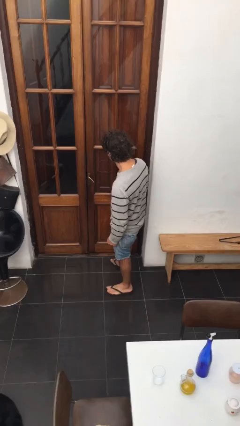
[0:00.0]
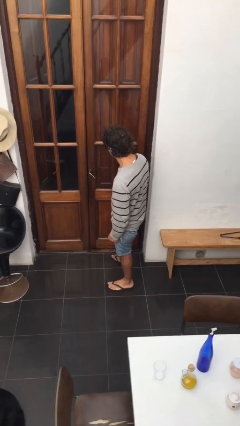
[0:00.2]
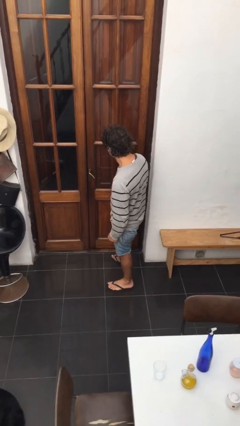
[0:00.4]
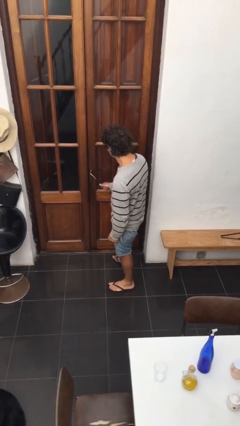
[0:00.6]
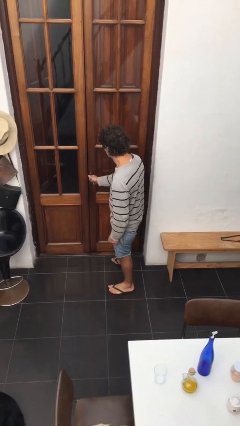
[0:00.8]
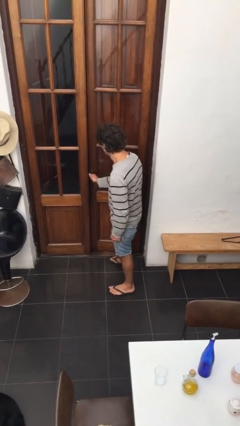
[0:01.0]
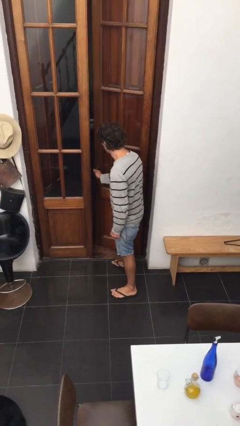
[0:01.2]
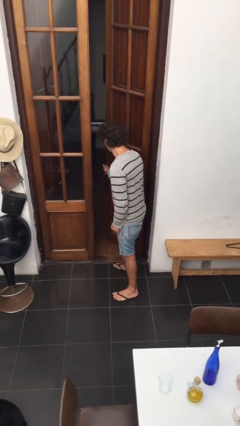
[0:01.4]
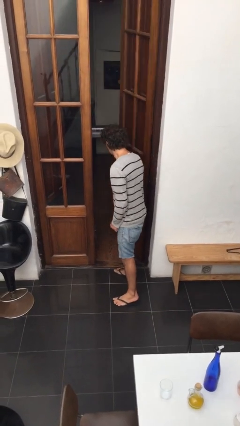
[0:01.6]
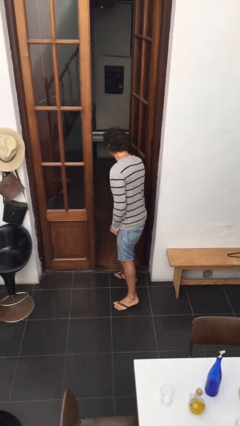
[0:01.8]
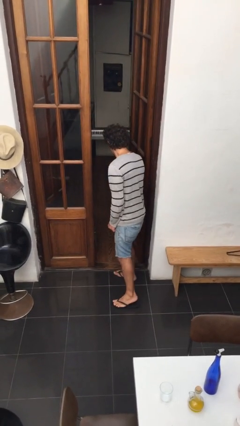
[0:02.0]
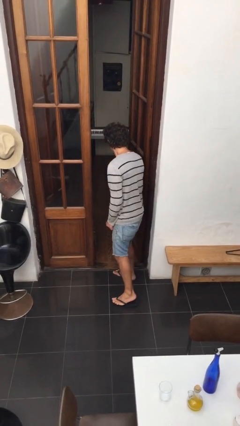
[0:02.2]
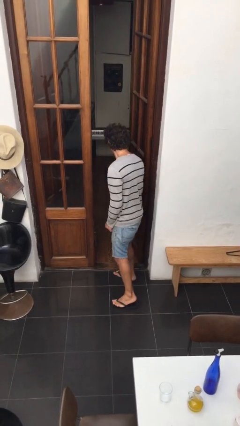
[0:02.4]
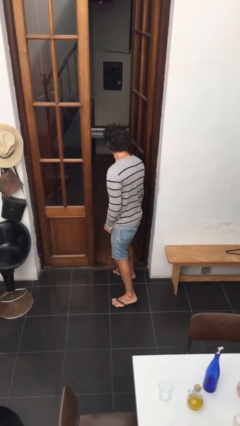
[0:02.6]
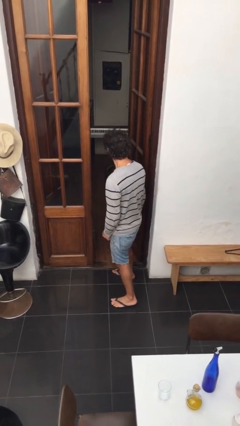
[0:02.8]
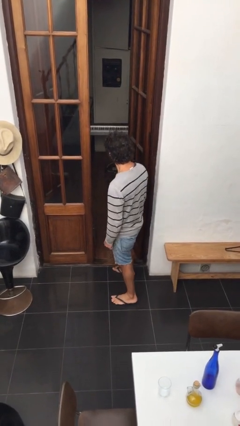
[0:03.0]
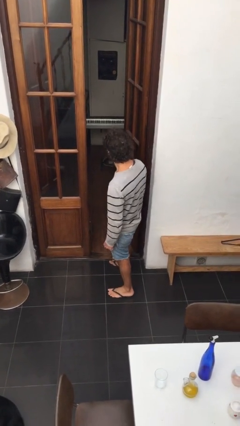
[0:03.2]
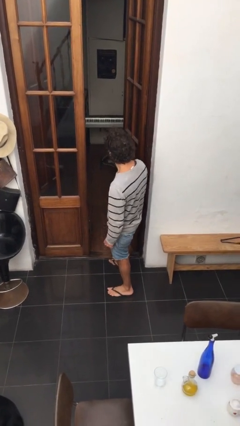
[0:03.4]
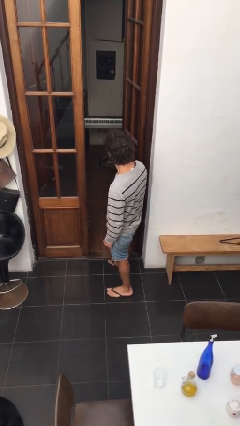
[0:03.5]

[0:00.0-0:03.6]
person opens facility door

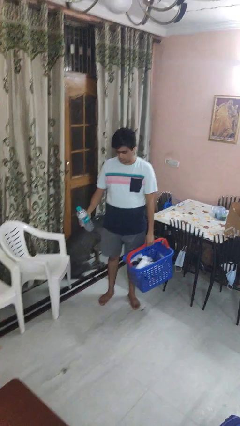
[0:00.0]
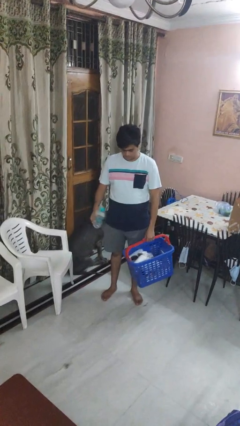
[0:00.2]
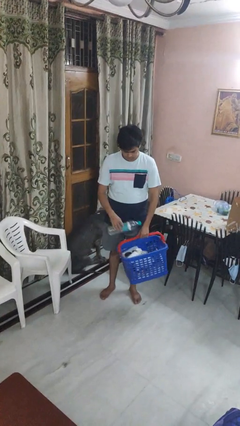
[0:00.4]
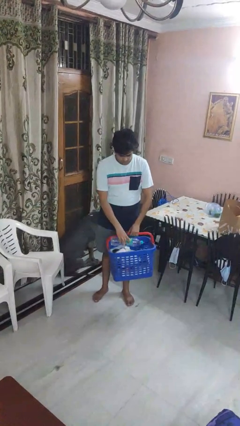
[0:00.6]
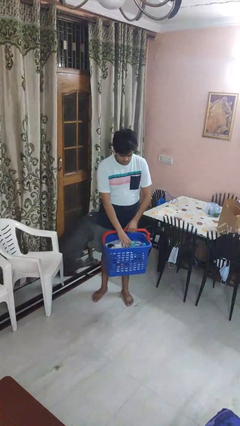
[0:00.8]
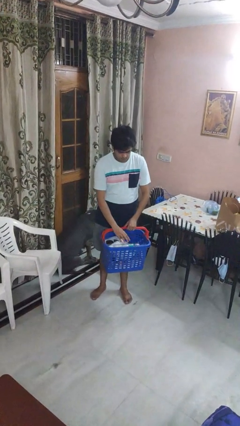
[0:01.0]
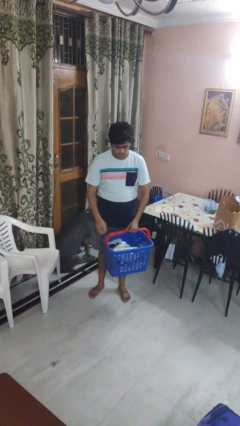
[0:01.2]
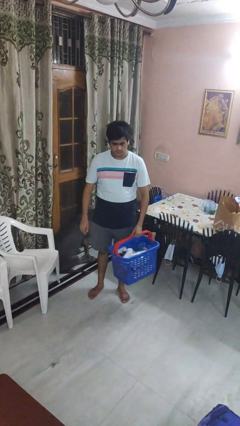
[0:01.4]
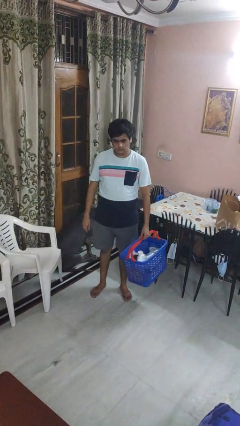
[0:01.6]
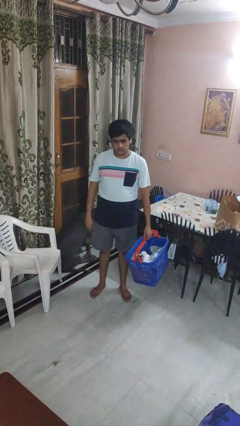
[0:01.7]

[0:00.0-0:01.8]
person puts object into basket

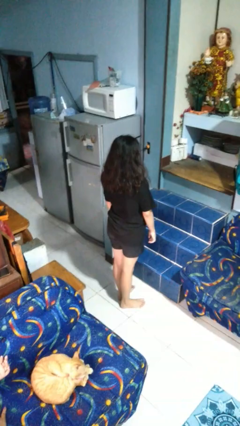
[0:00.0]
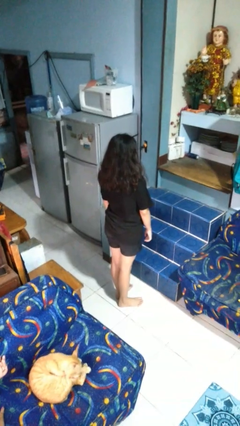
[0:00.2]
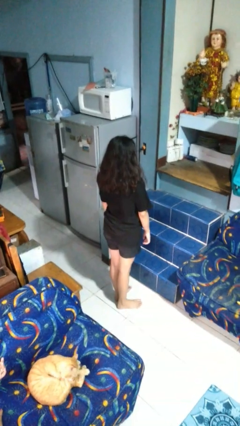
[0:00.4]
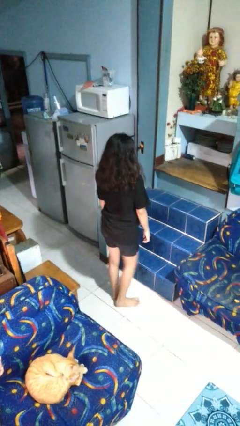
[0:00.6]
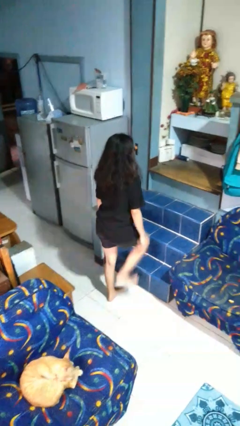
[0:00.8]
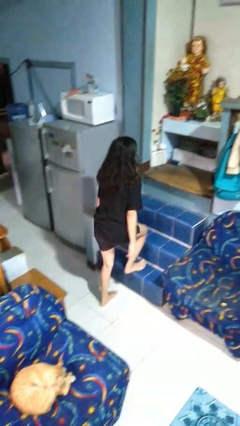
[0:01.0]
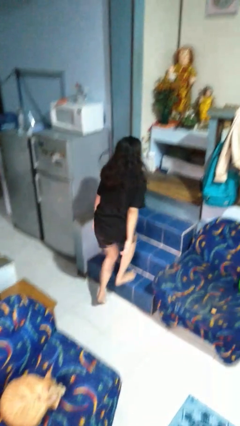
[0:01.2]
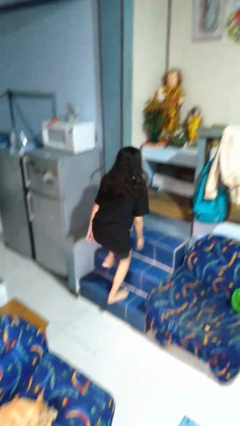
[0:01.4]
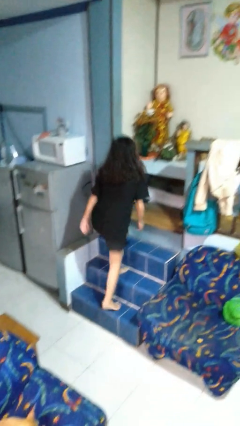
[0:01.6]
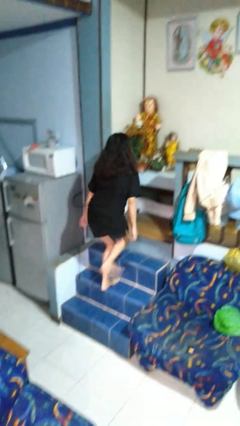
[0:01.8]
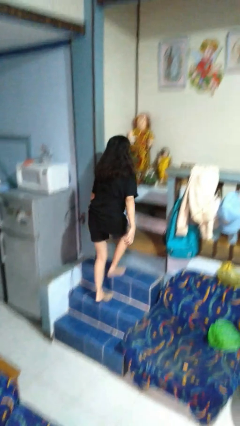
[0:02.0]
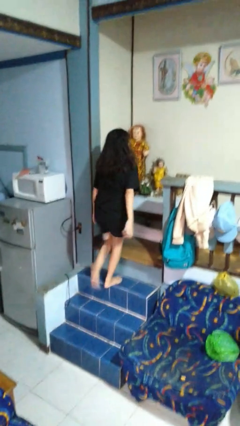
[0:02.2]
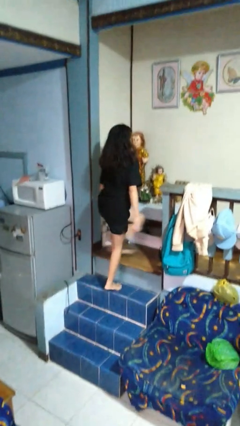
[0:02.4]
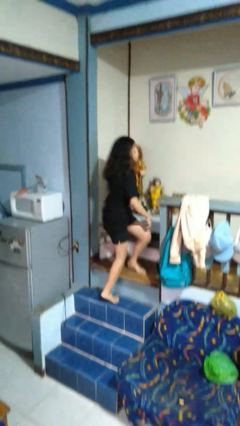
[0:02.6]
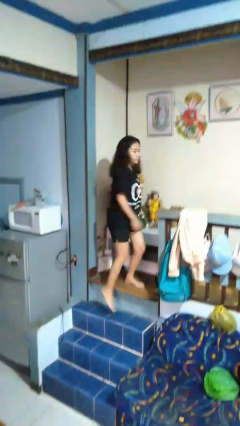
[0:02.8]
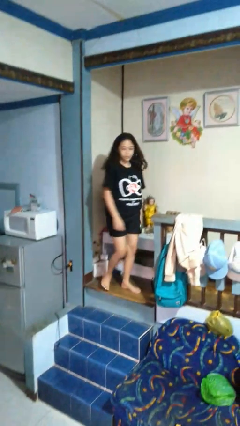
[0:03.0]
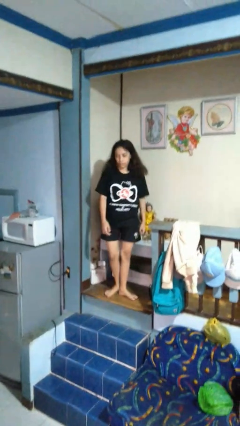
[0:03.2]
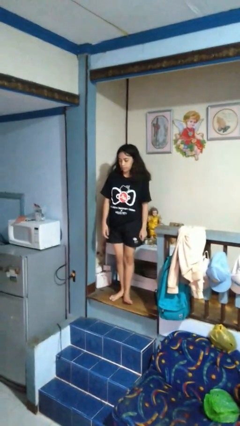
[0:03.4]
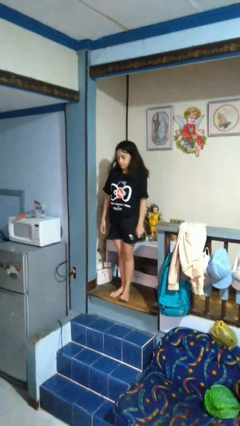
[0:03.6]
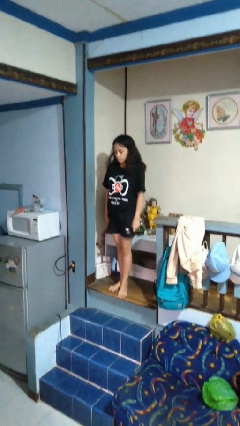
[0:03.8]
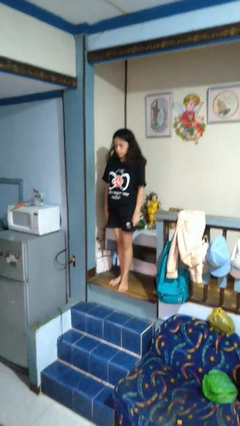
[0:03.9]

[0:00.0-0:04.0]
person climbs up stairs

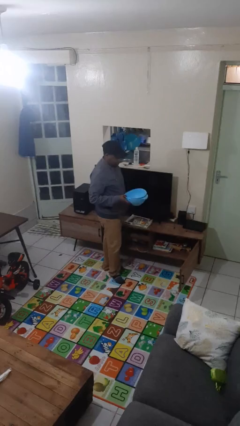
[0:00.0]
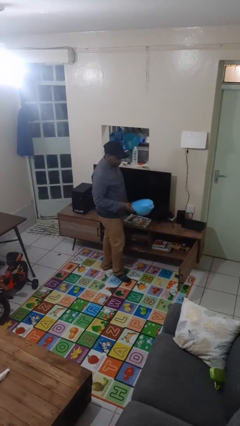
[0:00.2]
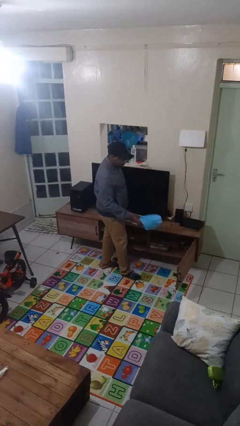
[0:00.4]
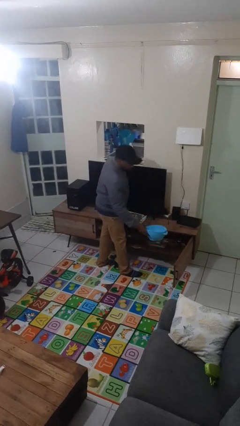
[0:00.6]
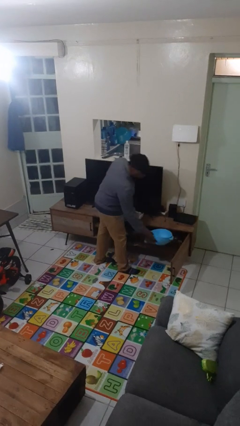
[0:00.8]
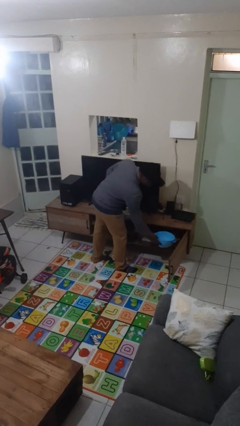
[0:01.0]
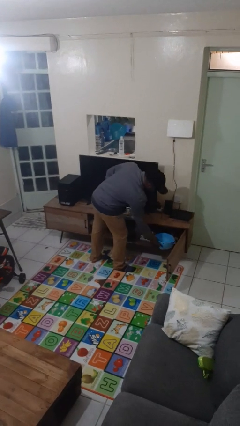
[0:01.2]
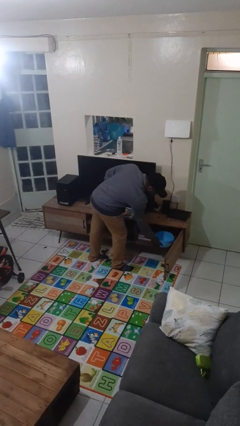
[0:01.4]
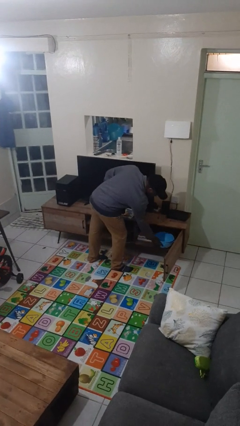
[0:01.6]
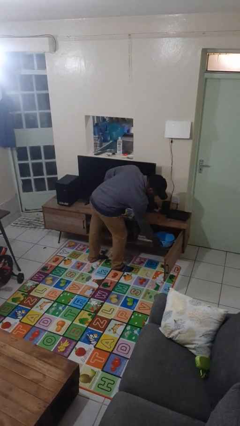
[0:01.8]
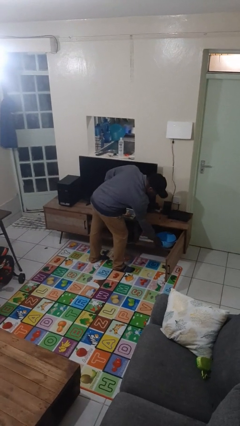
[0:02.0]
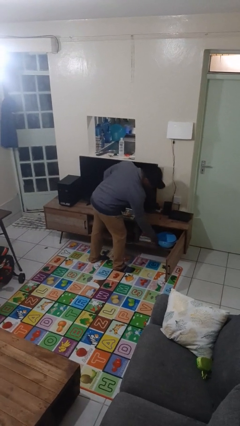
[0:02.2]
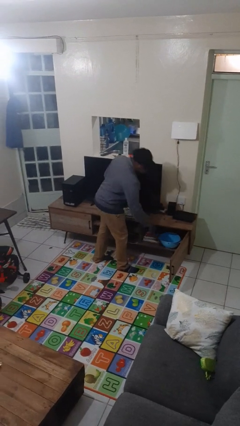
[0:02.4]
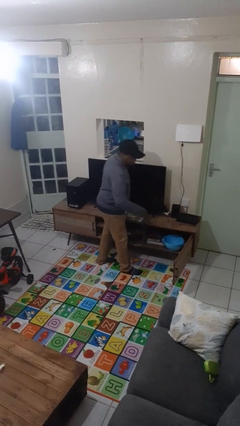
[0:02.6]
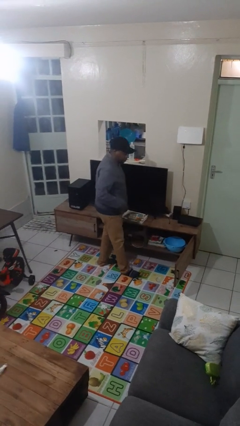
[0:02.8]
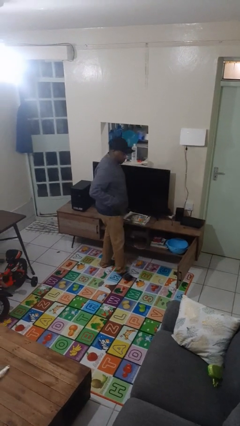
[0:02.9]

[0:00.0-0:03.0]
person puts down object into cabinet

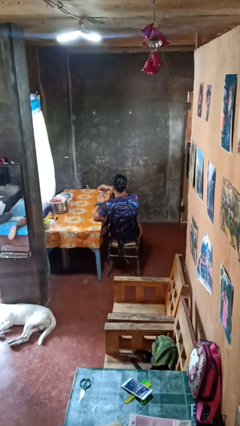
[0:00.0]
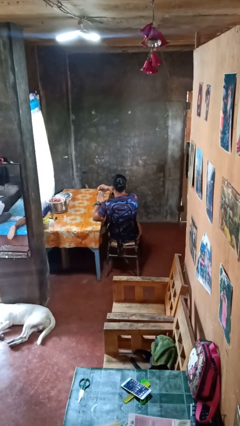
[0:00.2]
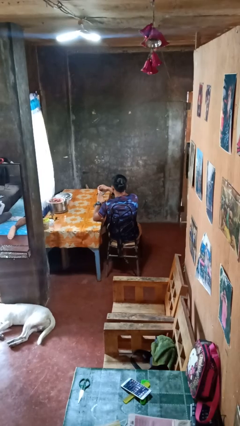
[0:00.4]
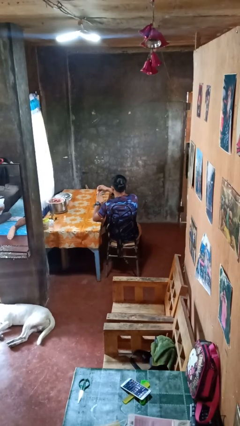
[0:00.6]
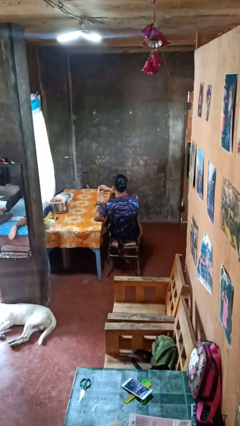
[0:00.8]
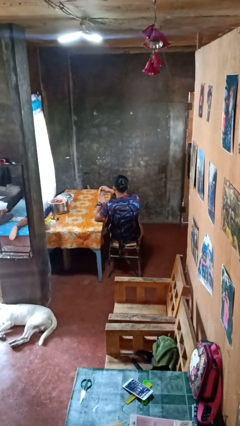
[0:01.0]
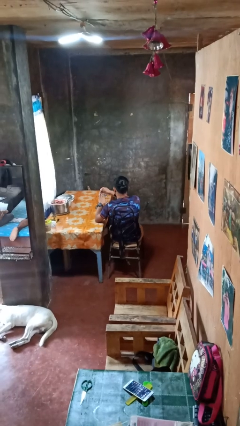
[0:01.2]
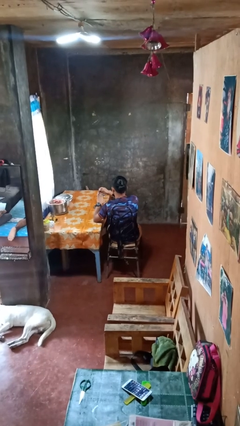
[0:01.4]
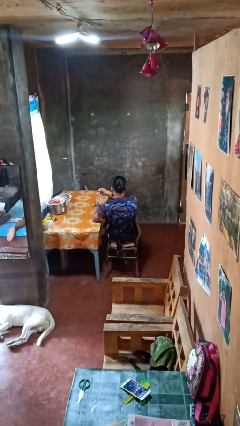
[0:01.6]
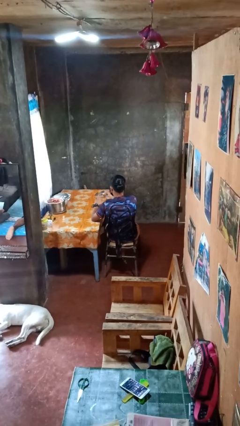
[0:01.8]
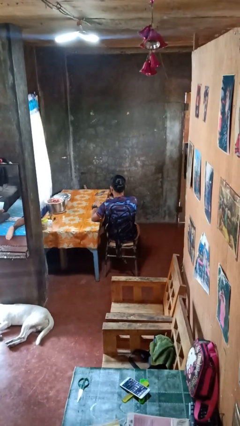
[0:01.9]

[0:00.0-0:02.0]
person clips fingernails

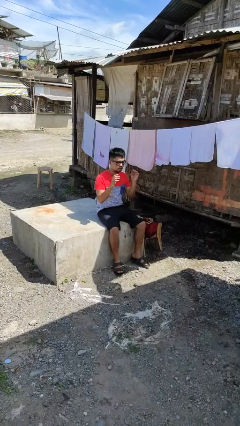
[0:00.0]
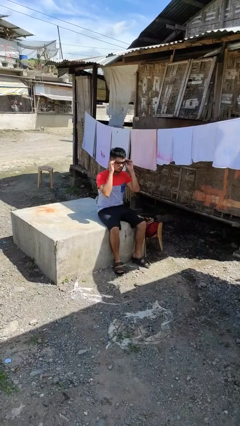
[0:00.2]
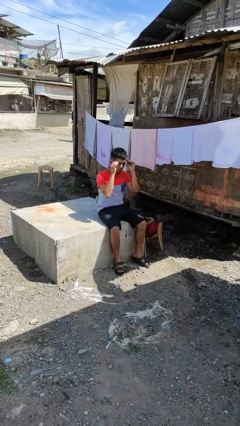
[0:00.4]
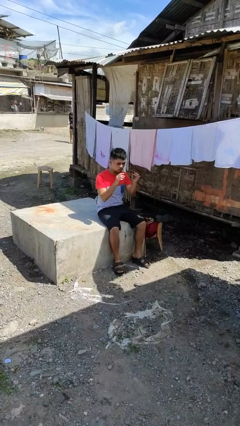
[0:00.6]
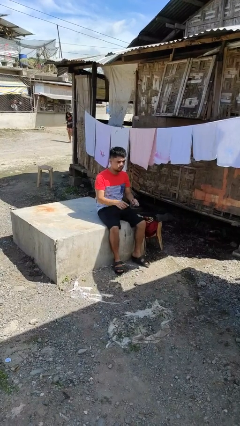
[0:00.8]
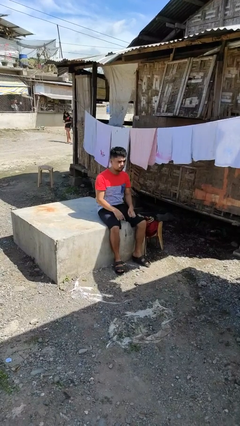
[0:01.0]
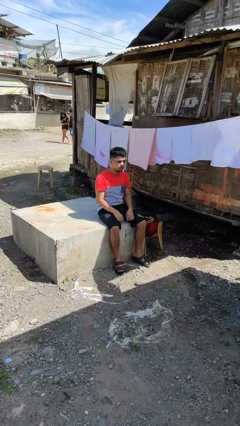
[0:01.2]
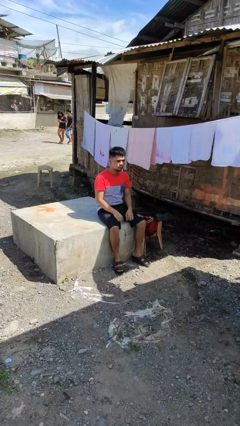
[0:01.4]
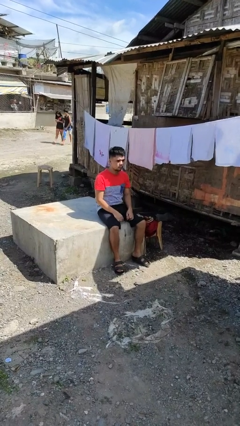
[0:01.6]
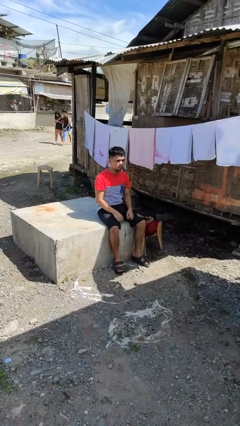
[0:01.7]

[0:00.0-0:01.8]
person takes off glasses

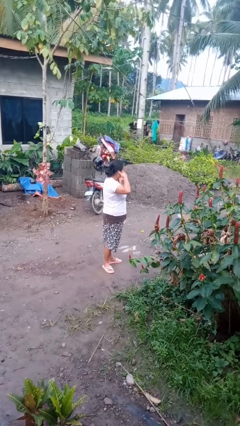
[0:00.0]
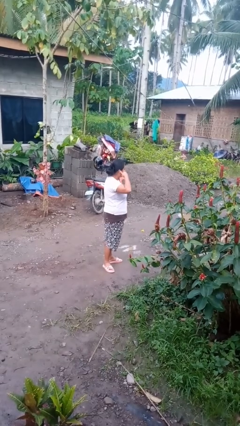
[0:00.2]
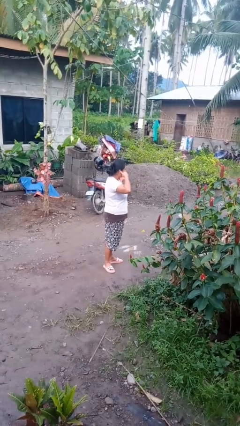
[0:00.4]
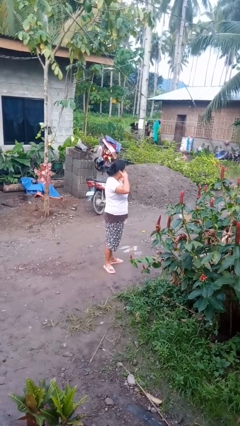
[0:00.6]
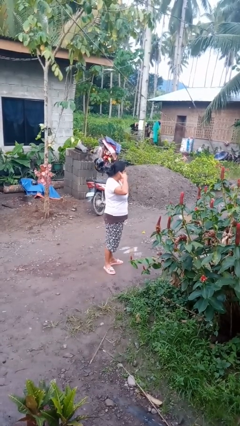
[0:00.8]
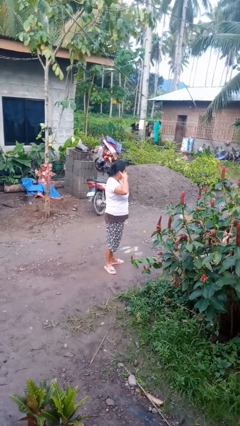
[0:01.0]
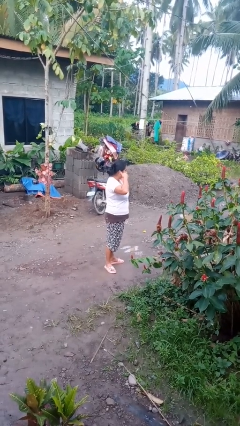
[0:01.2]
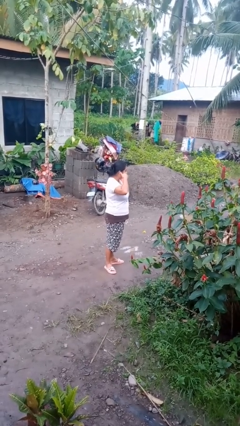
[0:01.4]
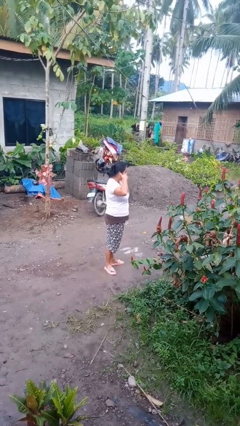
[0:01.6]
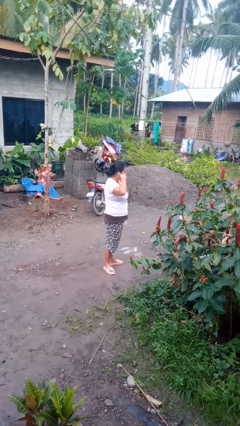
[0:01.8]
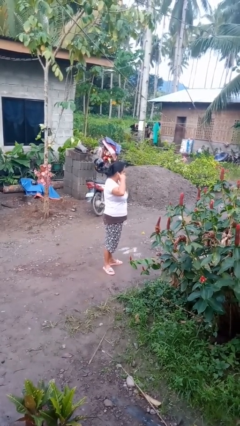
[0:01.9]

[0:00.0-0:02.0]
person gestures call me
